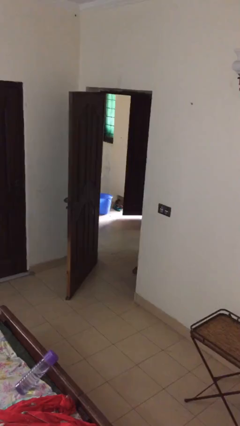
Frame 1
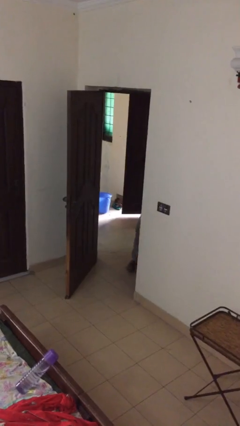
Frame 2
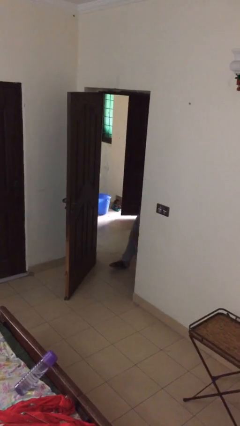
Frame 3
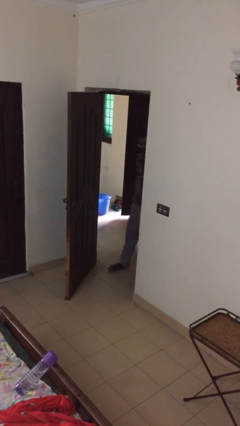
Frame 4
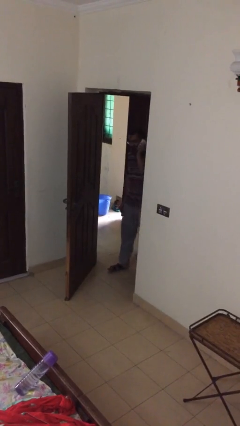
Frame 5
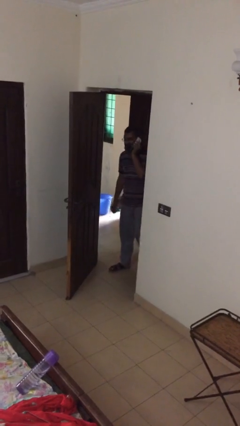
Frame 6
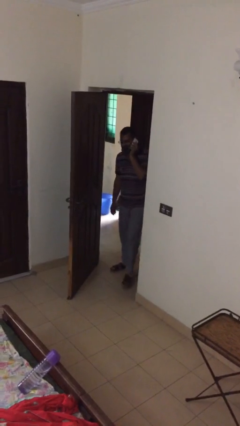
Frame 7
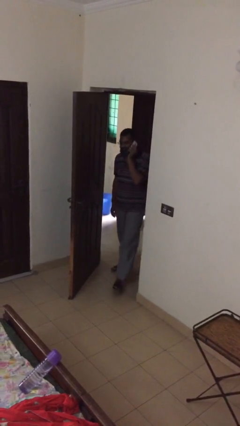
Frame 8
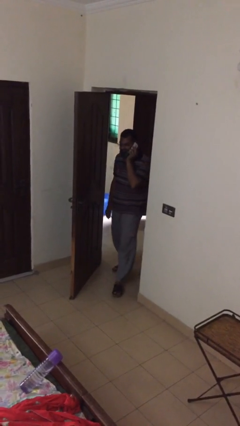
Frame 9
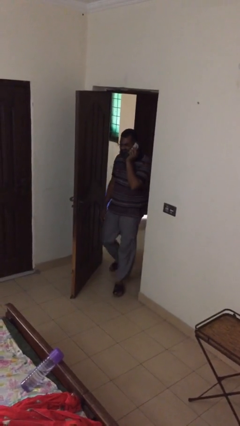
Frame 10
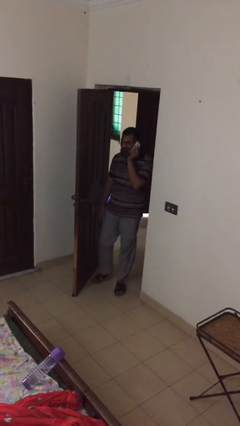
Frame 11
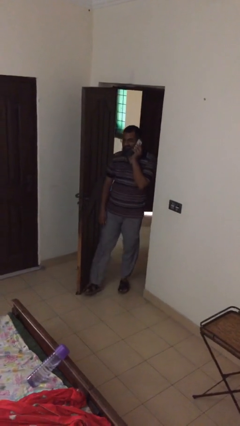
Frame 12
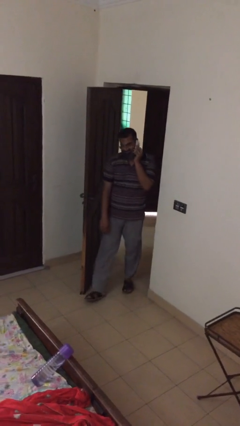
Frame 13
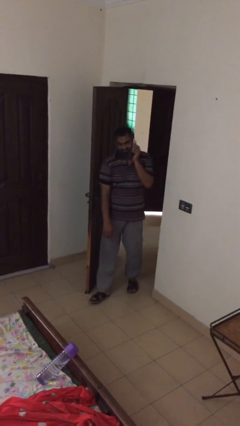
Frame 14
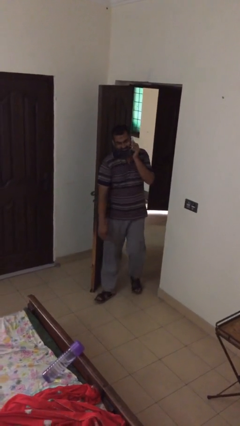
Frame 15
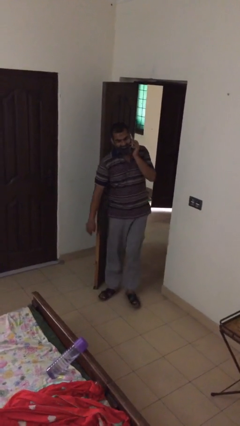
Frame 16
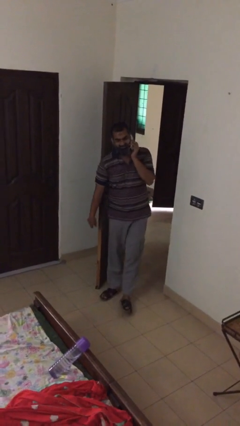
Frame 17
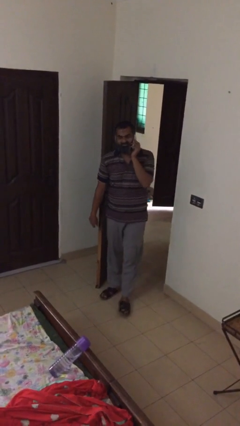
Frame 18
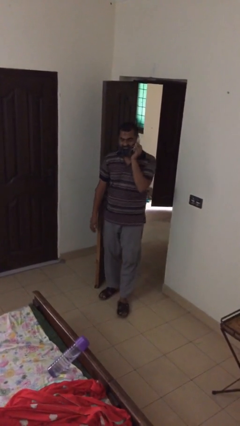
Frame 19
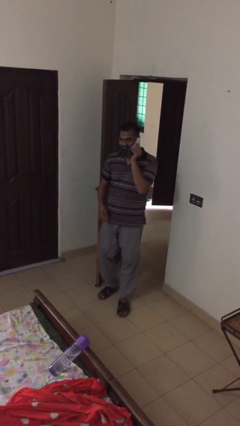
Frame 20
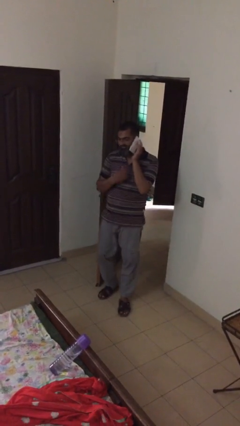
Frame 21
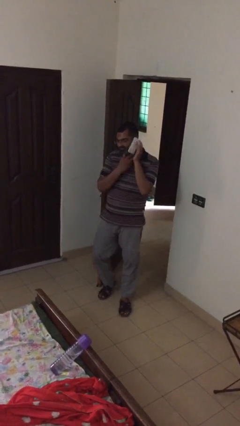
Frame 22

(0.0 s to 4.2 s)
person enters scene through structure

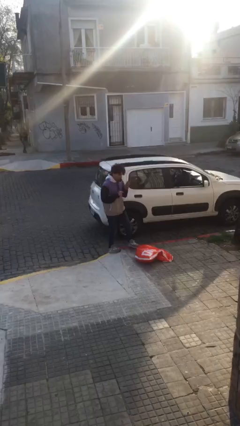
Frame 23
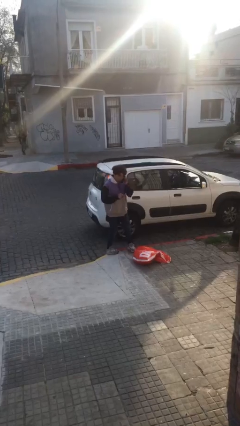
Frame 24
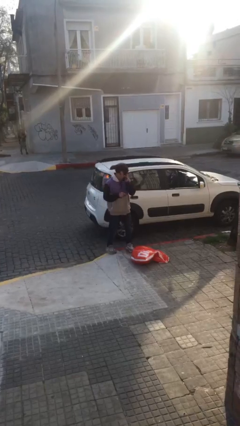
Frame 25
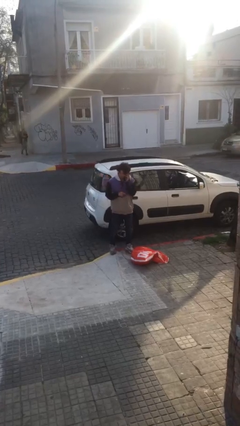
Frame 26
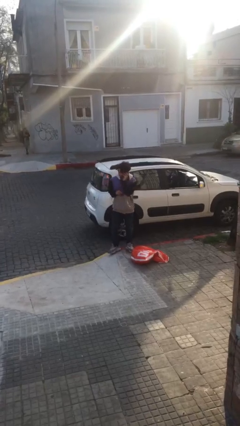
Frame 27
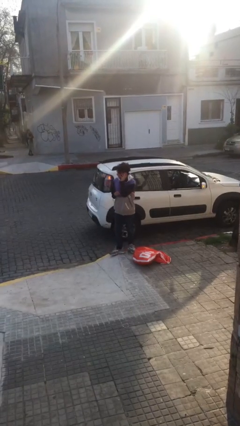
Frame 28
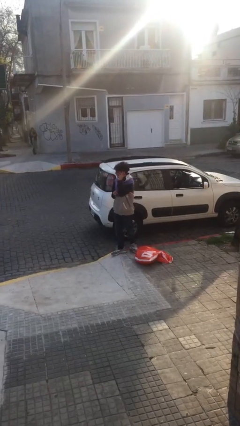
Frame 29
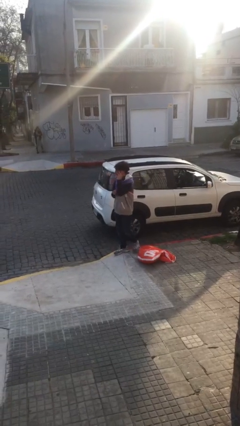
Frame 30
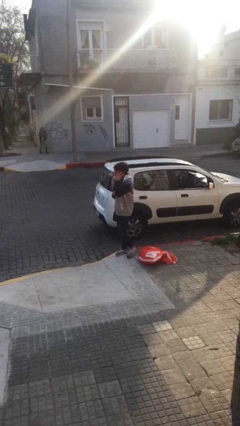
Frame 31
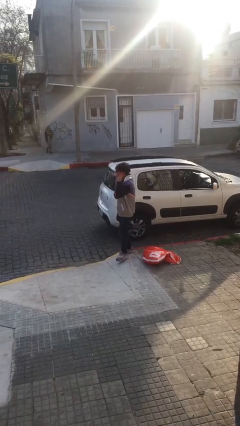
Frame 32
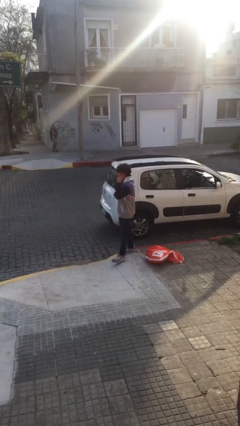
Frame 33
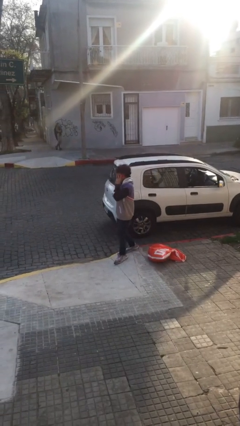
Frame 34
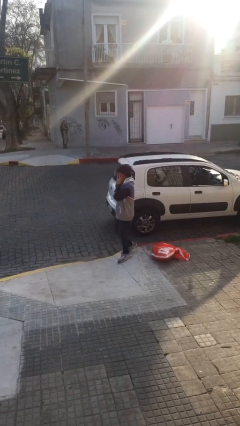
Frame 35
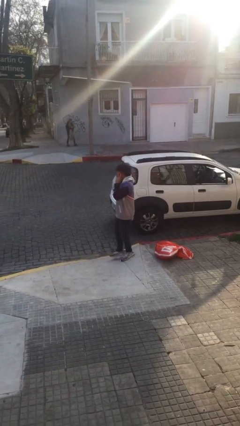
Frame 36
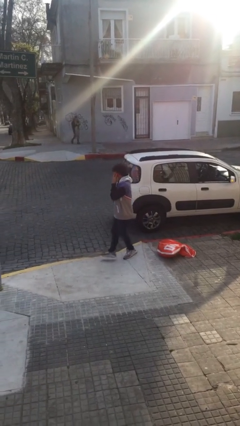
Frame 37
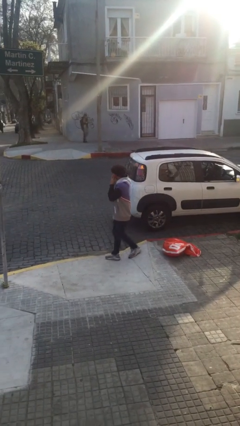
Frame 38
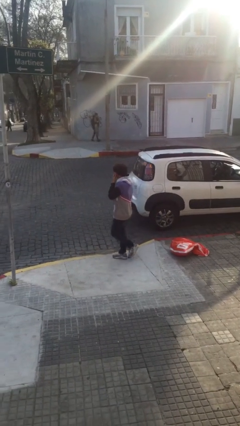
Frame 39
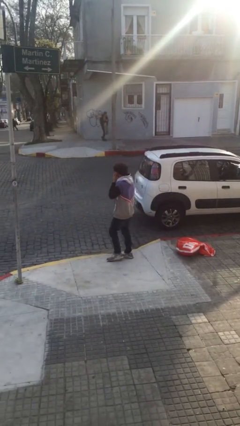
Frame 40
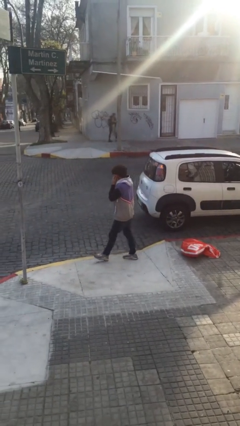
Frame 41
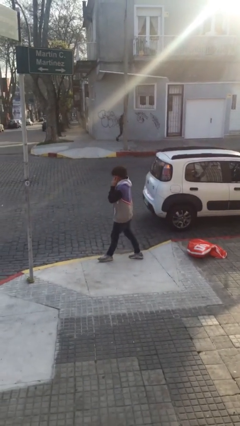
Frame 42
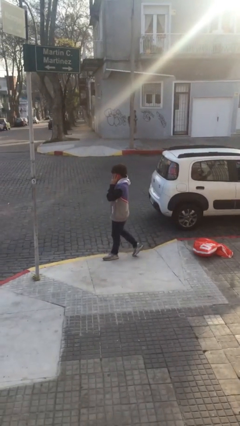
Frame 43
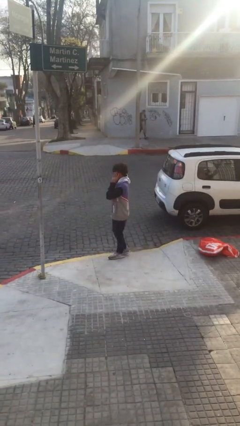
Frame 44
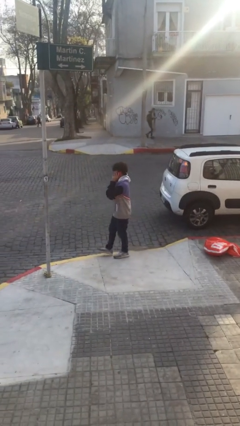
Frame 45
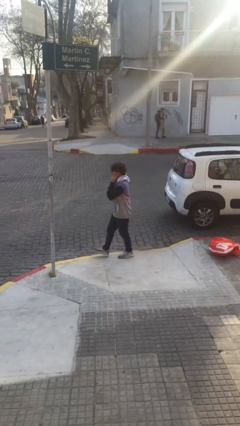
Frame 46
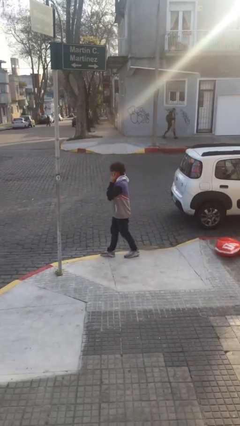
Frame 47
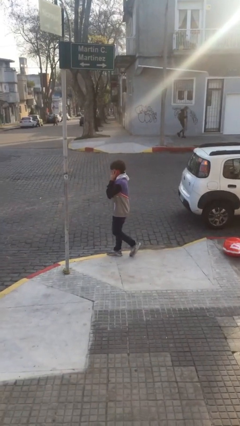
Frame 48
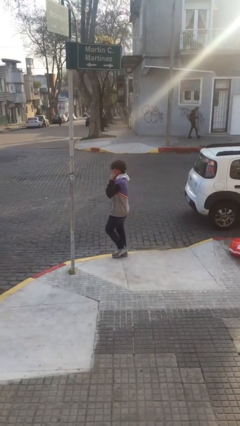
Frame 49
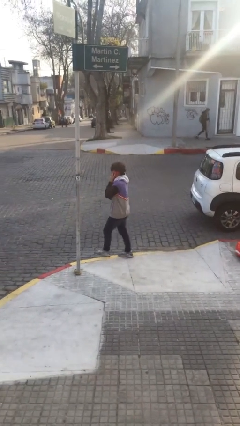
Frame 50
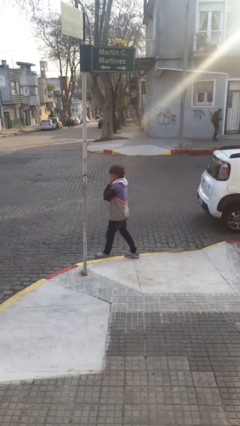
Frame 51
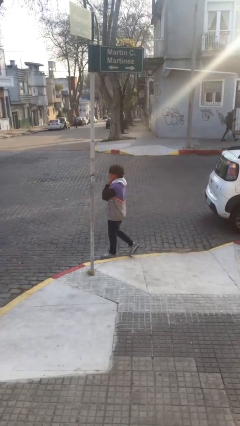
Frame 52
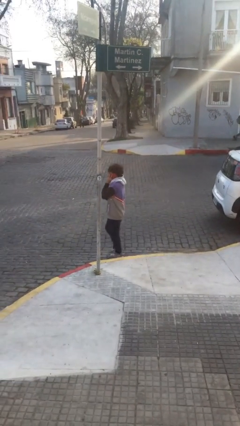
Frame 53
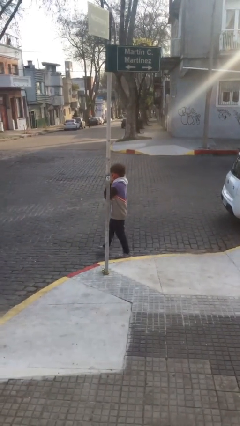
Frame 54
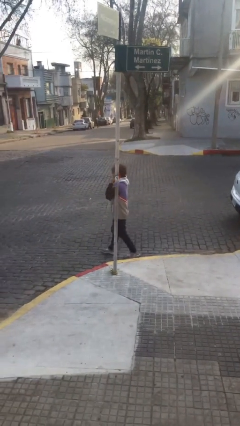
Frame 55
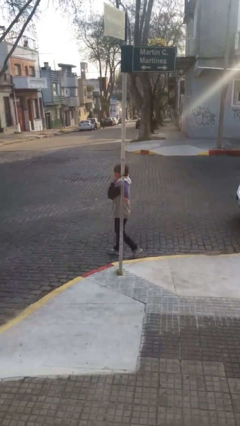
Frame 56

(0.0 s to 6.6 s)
person talks on phone

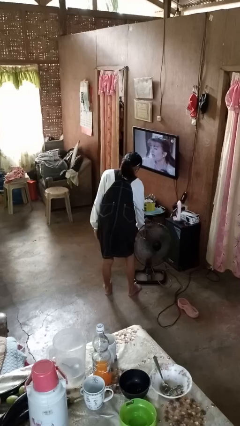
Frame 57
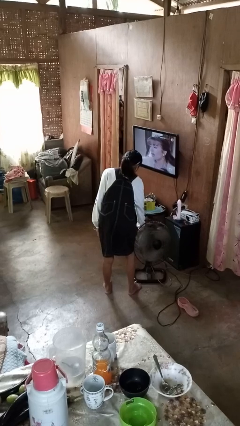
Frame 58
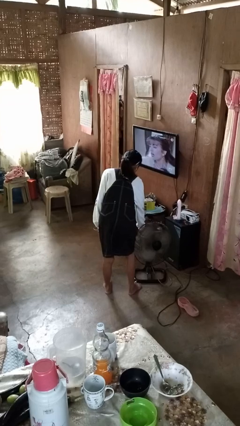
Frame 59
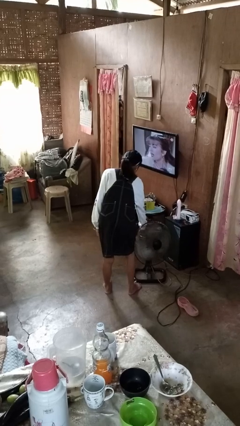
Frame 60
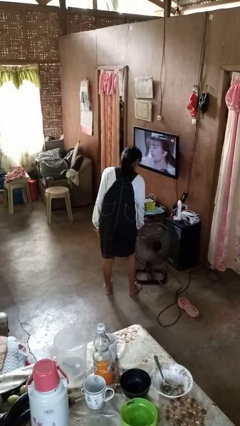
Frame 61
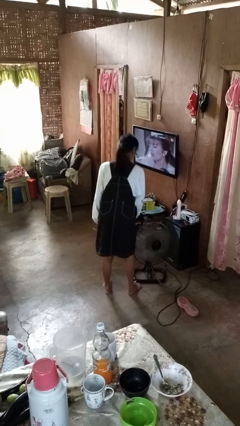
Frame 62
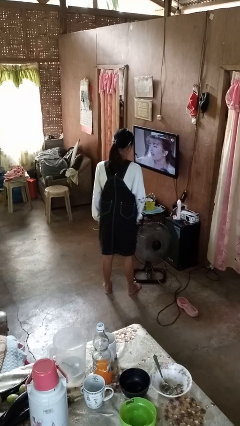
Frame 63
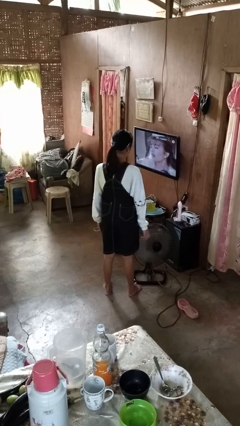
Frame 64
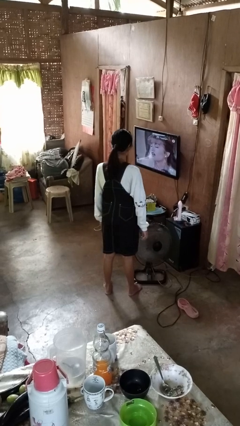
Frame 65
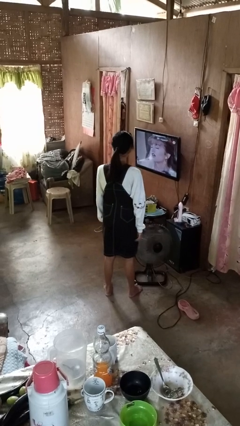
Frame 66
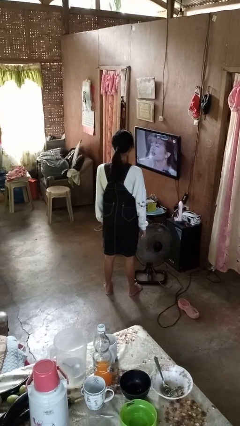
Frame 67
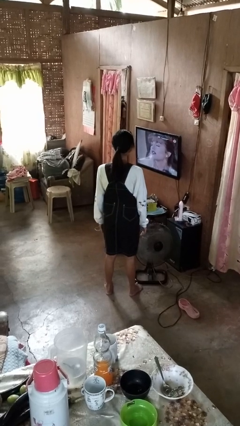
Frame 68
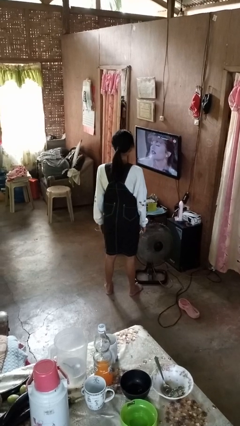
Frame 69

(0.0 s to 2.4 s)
person turns on fan

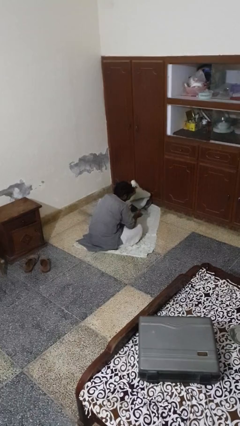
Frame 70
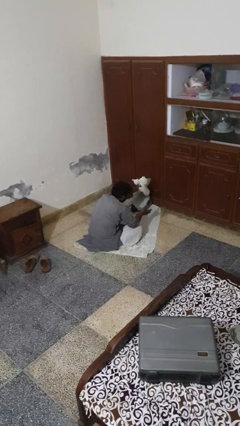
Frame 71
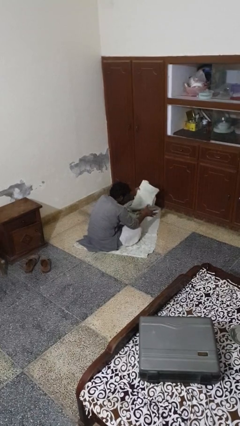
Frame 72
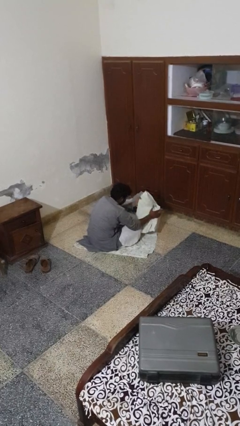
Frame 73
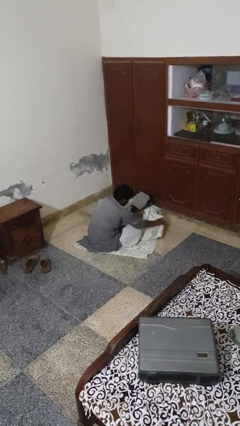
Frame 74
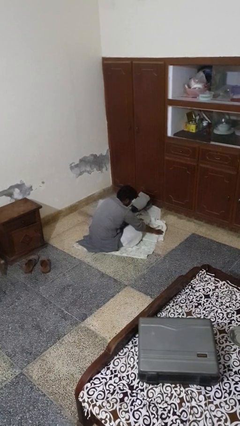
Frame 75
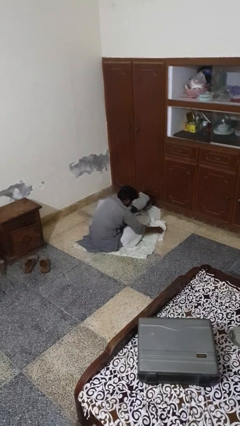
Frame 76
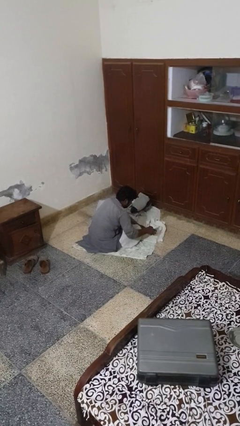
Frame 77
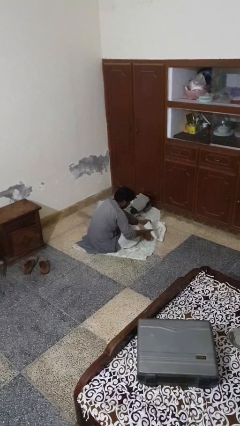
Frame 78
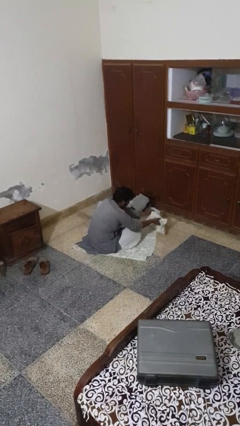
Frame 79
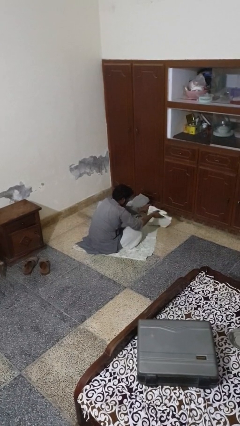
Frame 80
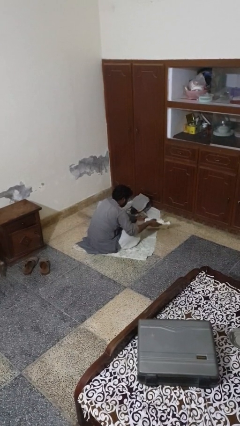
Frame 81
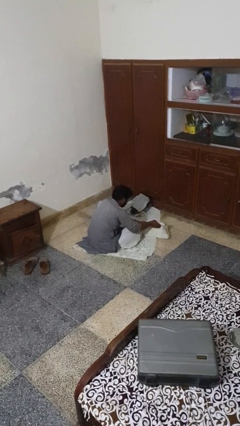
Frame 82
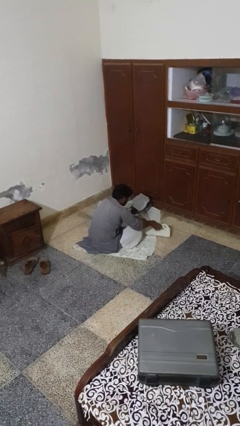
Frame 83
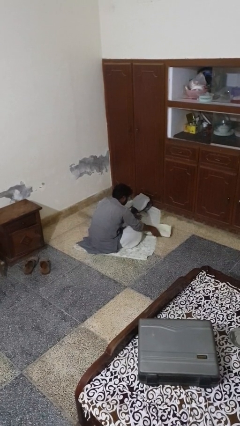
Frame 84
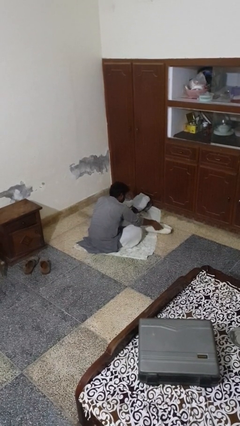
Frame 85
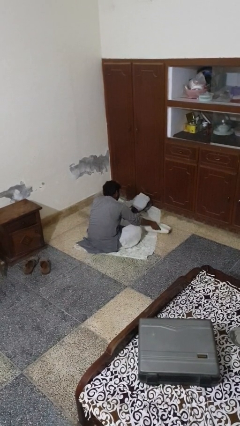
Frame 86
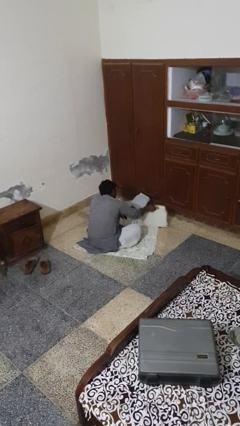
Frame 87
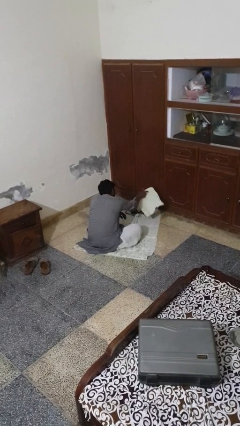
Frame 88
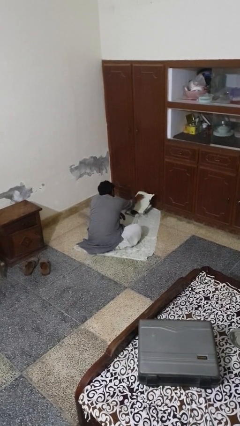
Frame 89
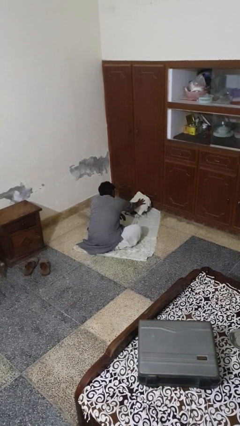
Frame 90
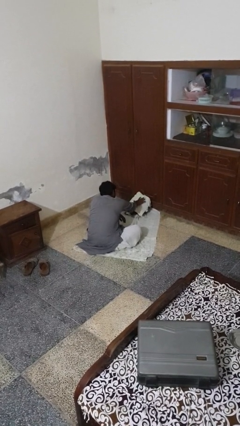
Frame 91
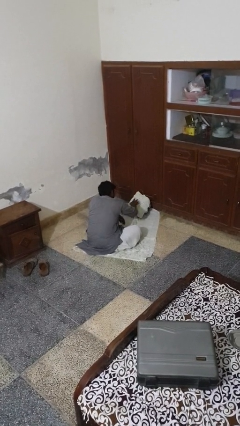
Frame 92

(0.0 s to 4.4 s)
person folds towel
